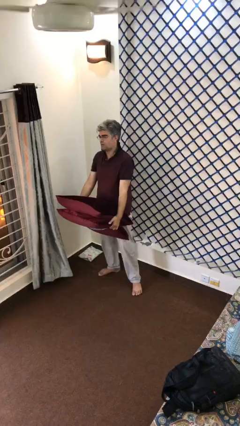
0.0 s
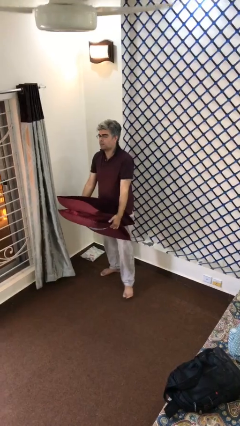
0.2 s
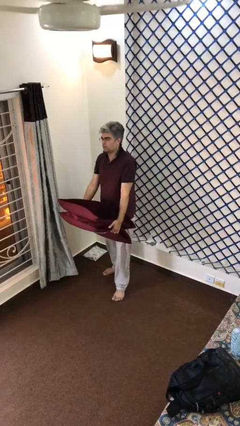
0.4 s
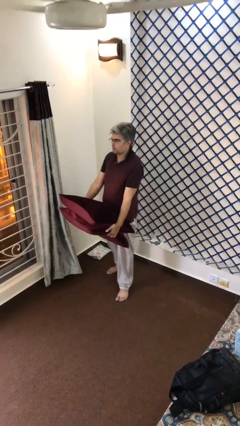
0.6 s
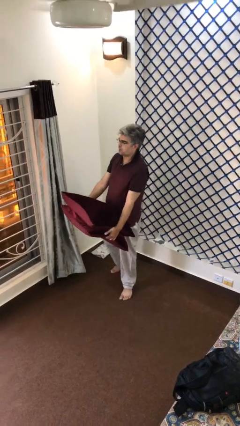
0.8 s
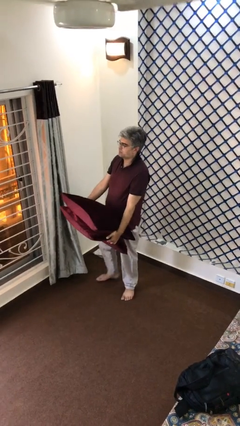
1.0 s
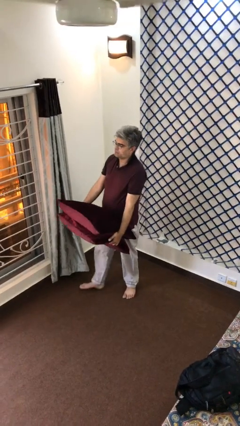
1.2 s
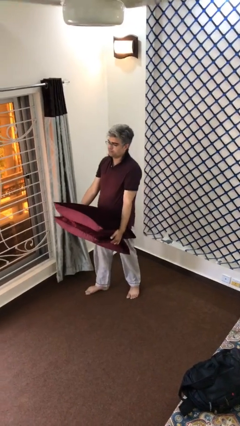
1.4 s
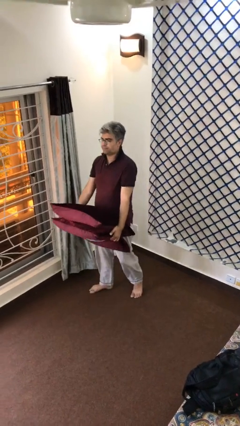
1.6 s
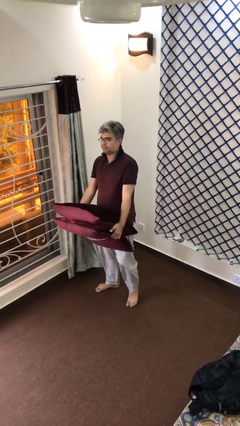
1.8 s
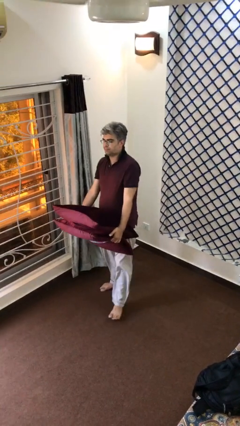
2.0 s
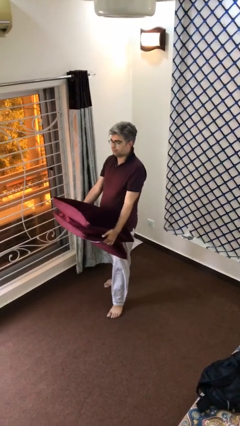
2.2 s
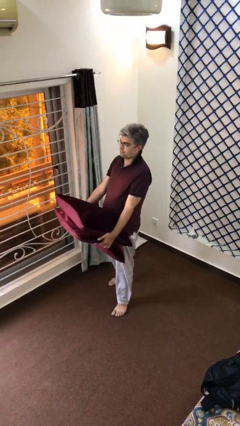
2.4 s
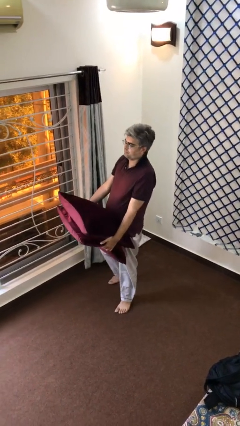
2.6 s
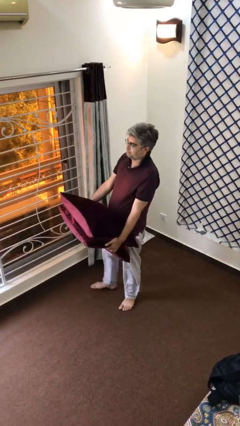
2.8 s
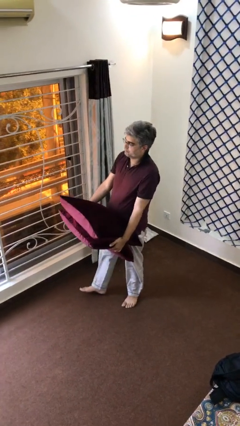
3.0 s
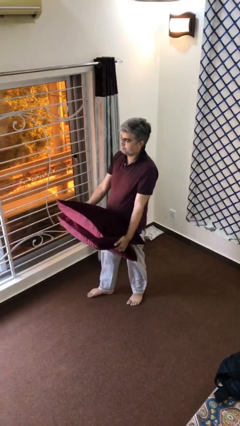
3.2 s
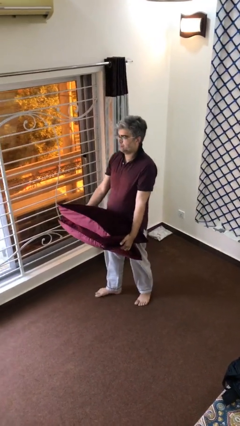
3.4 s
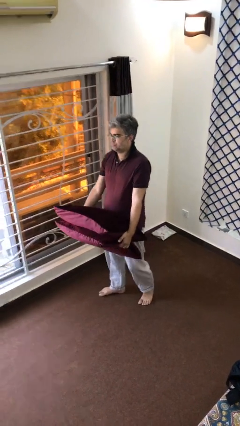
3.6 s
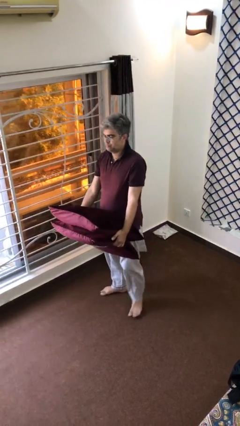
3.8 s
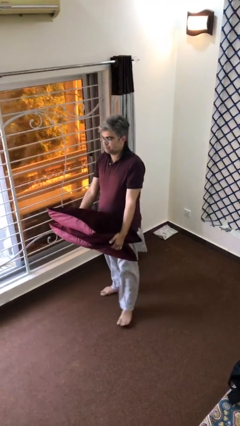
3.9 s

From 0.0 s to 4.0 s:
person carries heavy object

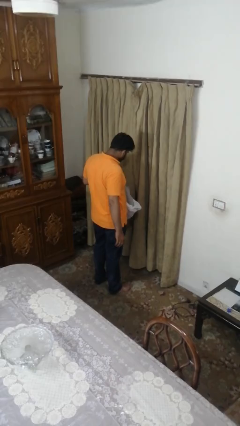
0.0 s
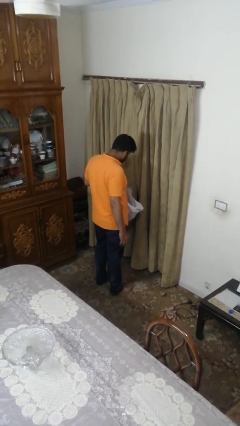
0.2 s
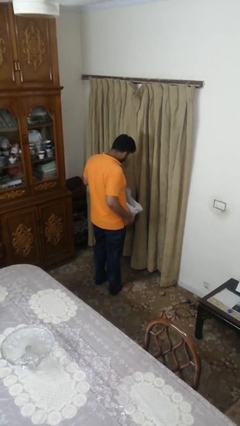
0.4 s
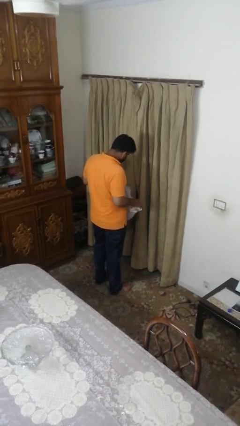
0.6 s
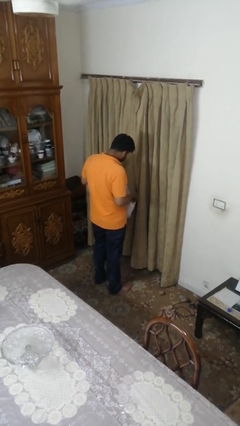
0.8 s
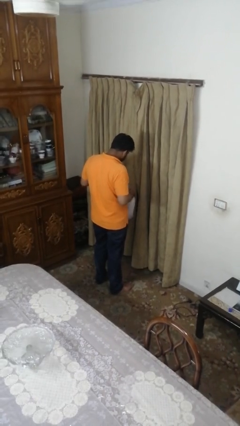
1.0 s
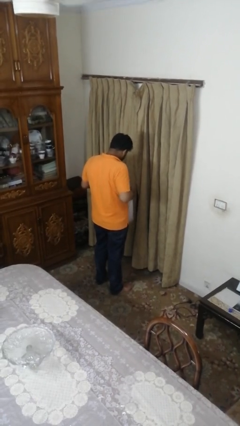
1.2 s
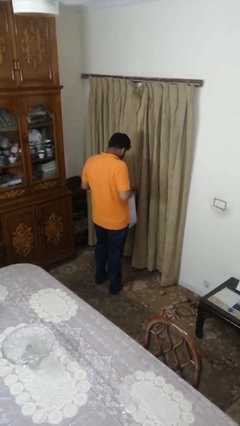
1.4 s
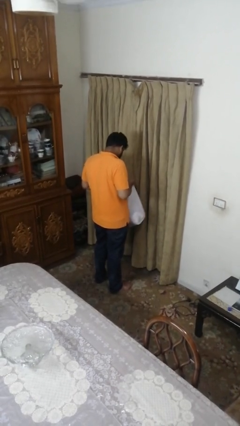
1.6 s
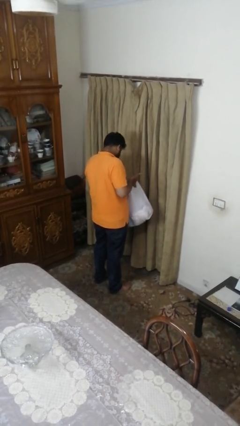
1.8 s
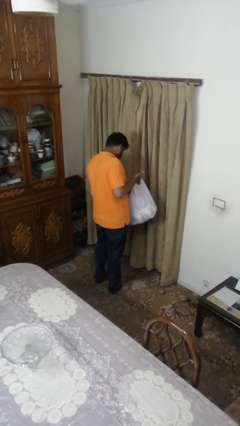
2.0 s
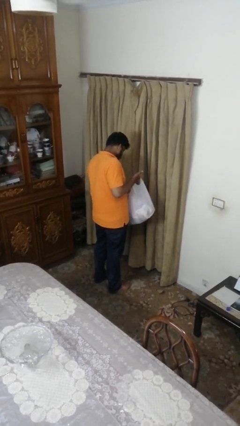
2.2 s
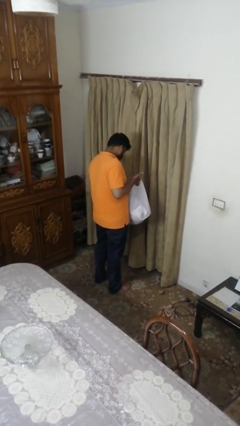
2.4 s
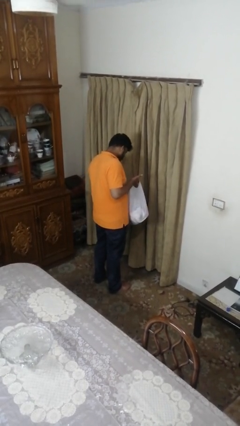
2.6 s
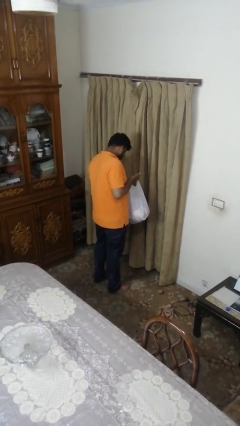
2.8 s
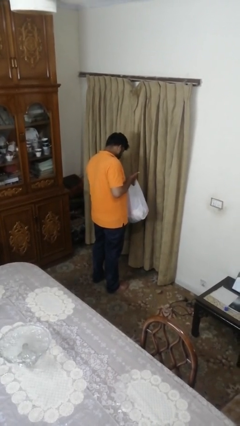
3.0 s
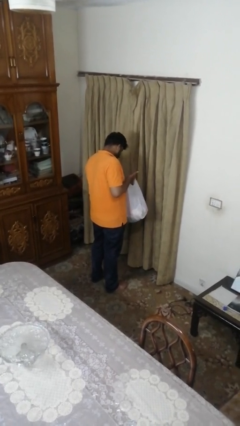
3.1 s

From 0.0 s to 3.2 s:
person searches in bag

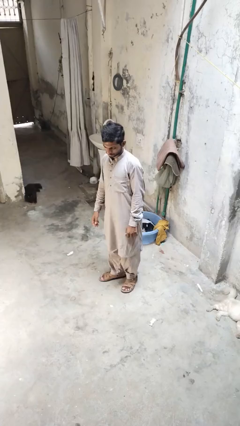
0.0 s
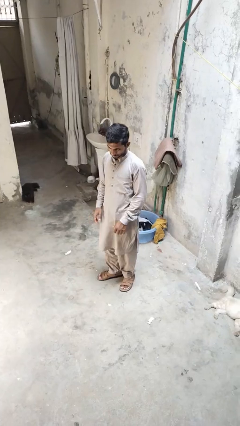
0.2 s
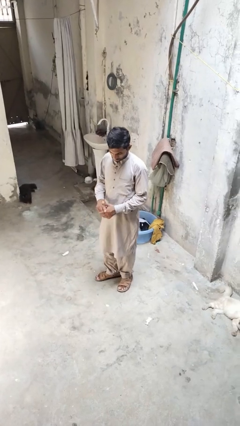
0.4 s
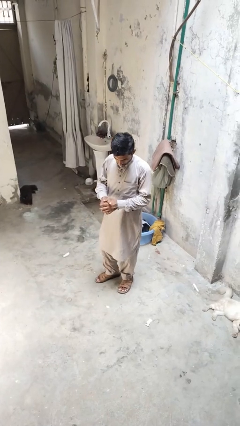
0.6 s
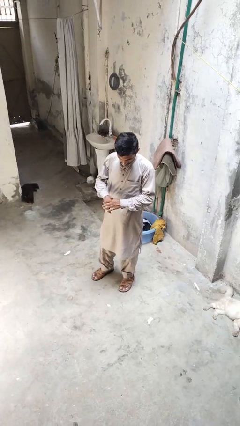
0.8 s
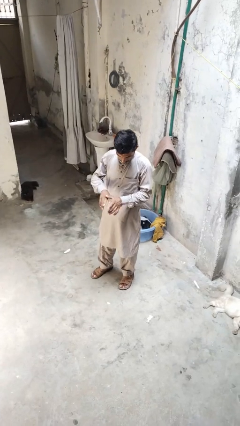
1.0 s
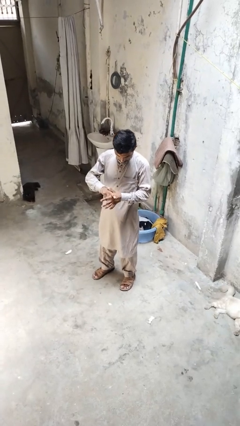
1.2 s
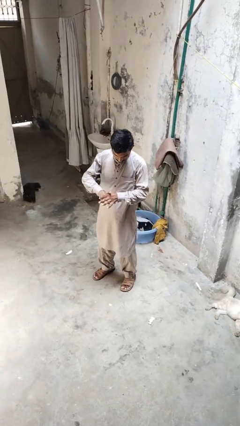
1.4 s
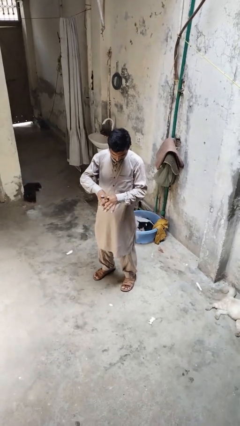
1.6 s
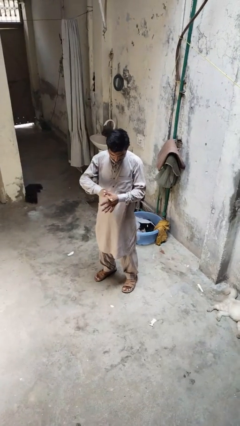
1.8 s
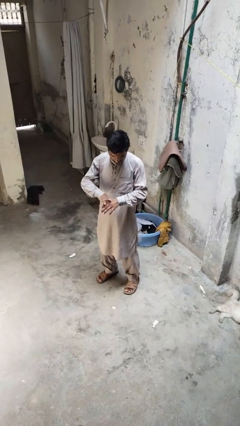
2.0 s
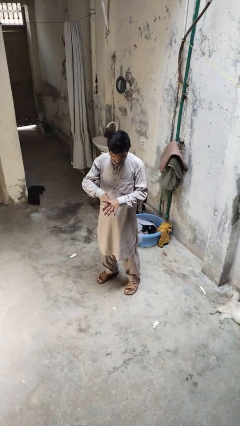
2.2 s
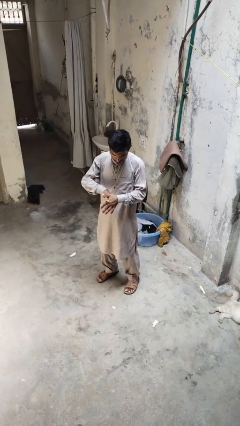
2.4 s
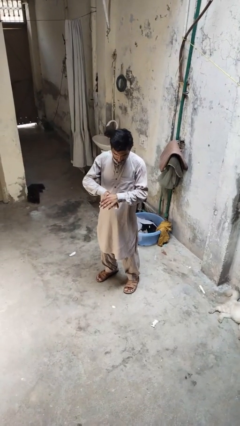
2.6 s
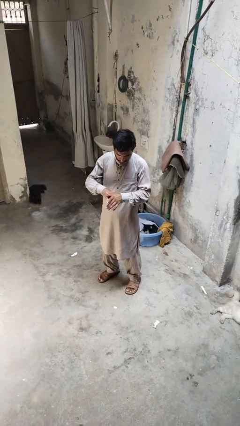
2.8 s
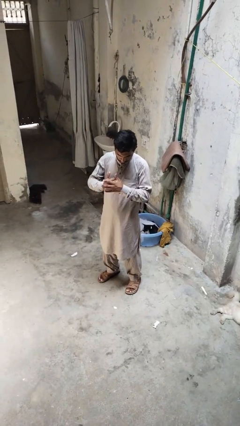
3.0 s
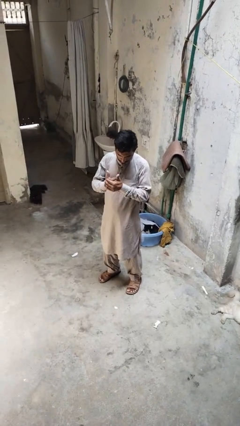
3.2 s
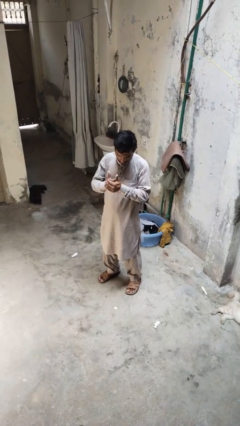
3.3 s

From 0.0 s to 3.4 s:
person cracks knuckles

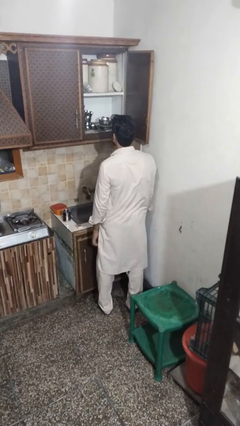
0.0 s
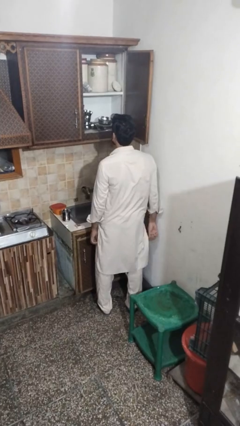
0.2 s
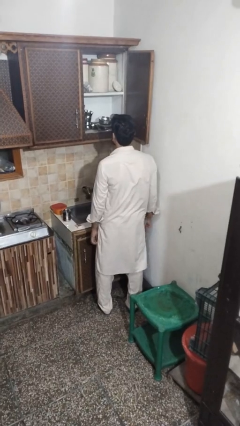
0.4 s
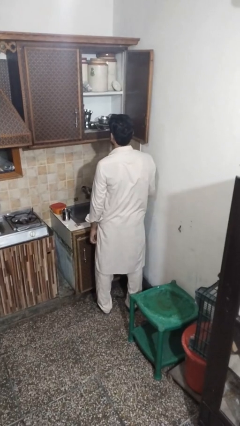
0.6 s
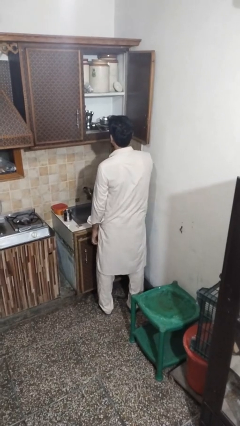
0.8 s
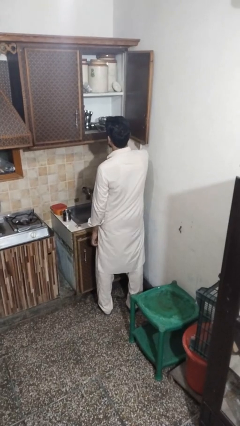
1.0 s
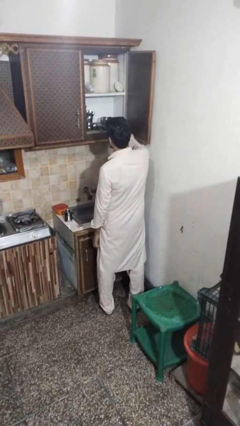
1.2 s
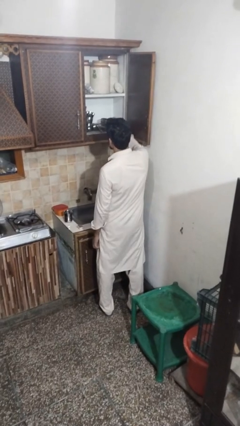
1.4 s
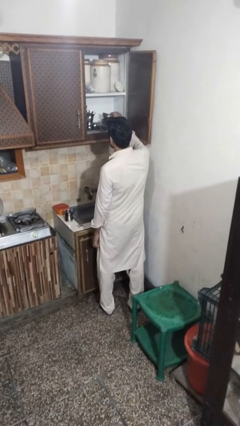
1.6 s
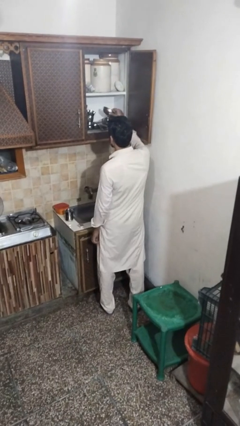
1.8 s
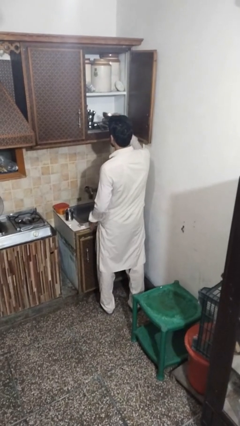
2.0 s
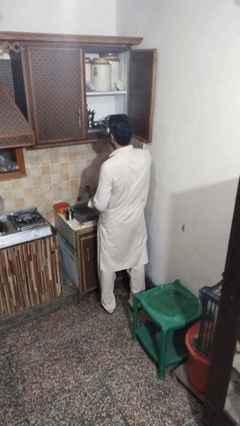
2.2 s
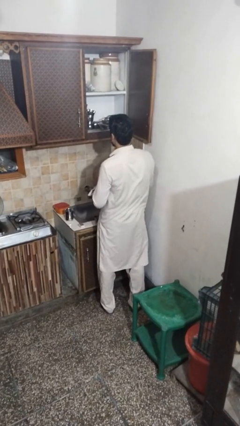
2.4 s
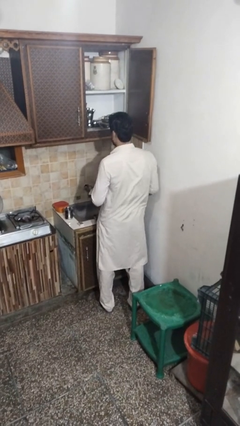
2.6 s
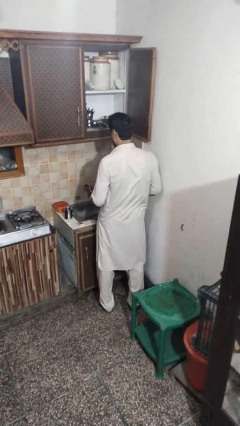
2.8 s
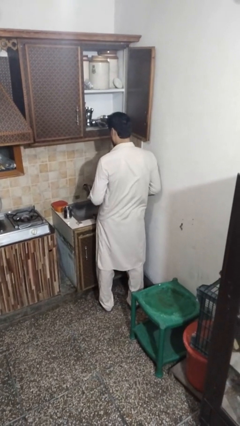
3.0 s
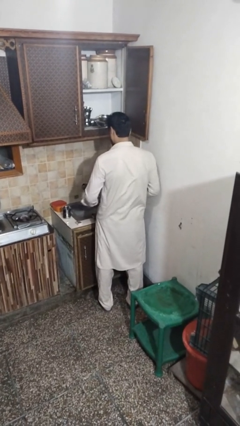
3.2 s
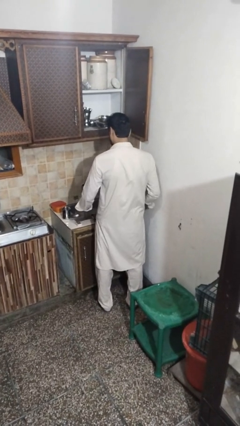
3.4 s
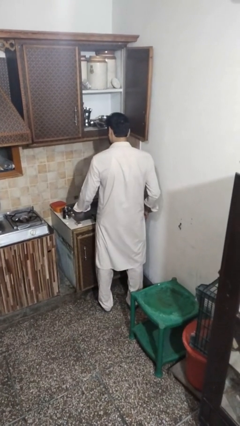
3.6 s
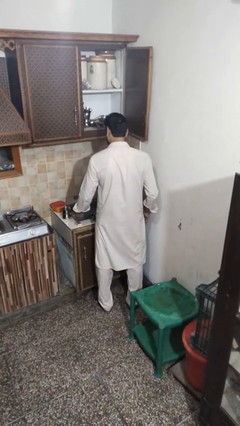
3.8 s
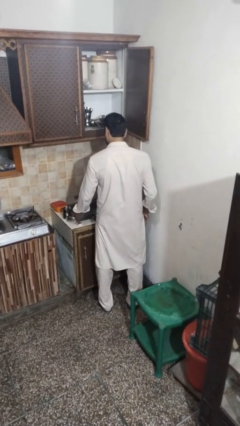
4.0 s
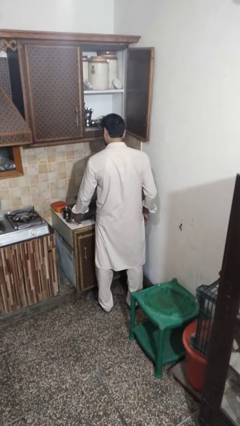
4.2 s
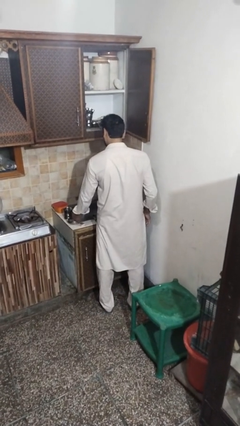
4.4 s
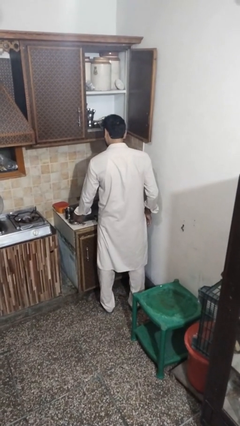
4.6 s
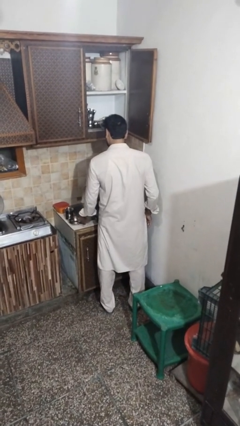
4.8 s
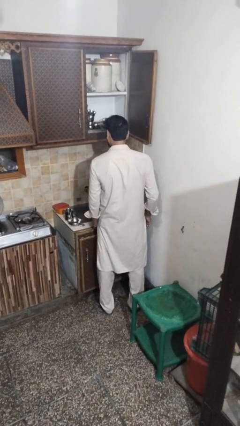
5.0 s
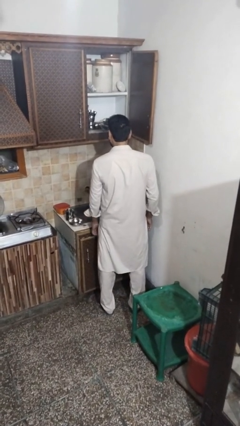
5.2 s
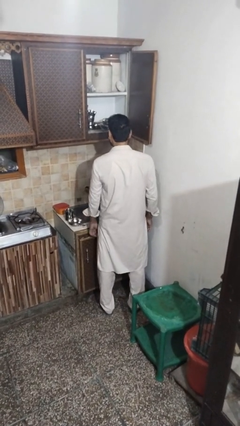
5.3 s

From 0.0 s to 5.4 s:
person takes object from cabinet

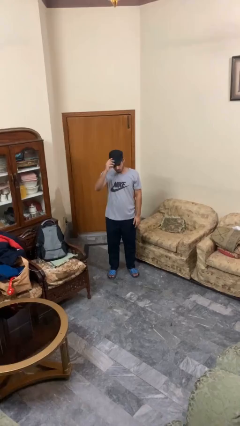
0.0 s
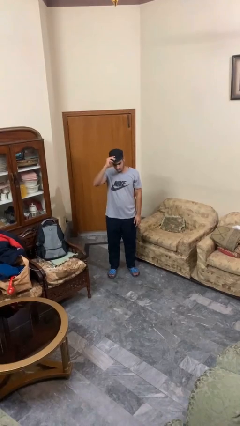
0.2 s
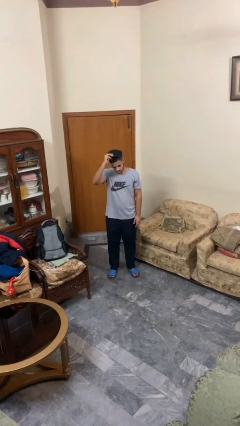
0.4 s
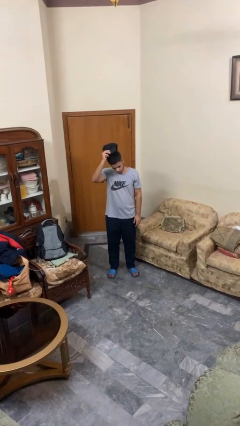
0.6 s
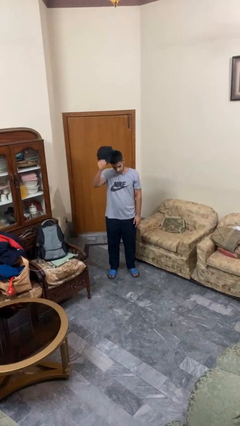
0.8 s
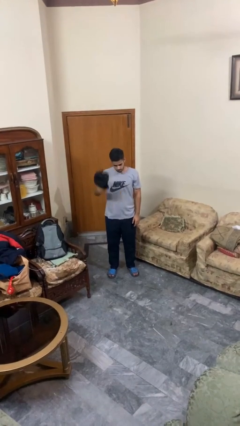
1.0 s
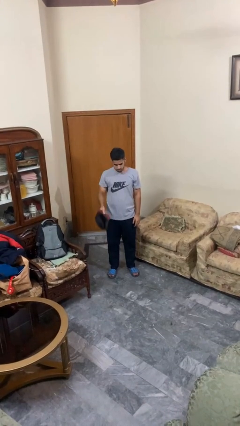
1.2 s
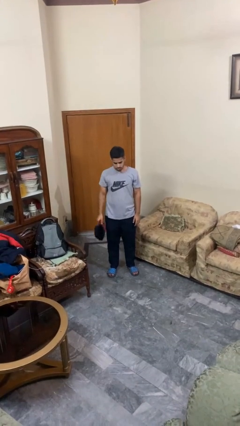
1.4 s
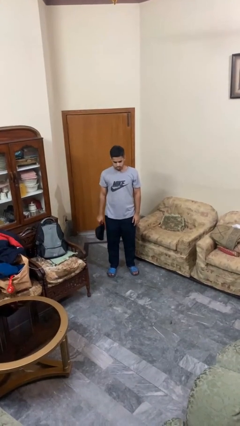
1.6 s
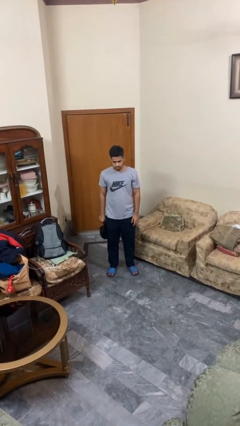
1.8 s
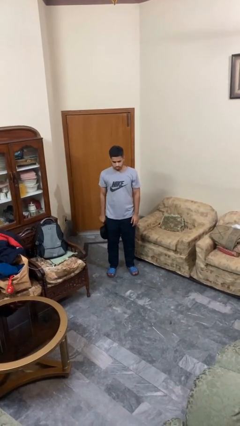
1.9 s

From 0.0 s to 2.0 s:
person takes off hat
